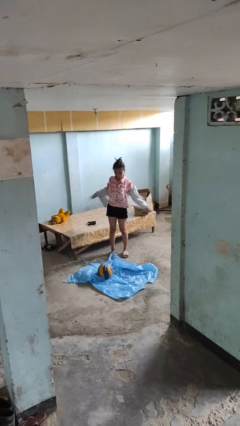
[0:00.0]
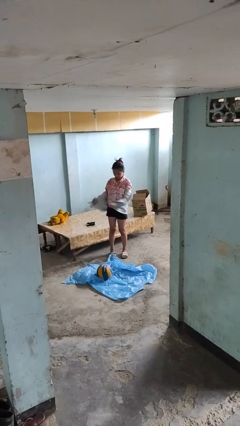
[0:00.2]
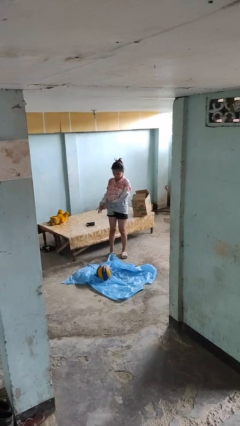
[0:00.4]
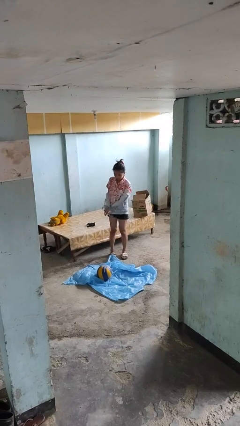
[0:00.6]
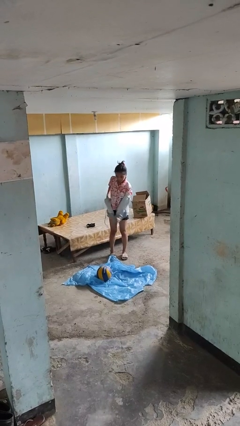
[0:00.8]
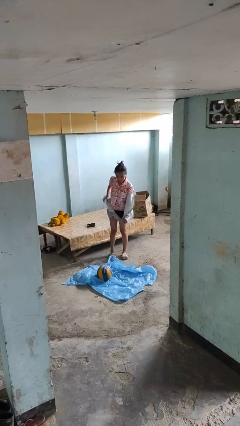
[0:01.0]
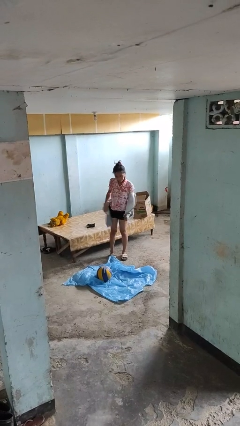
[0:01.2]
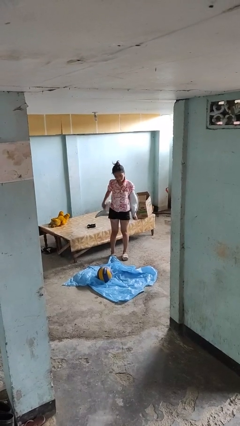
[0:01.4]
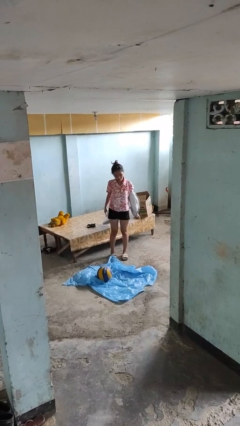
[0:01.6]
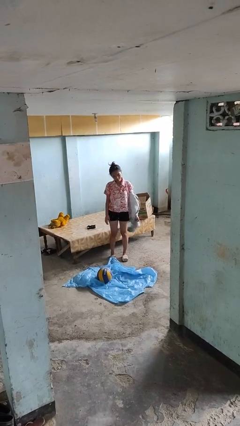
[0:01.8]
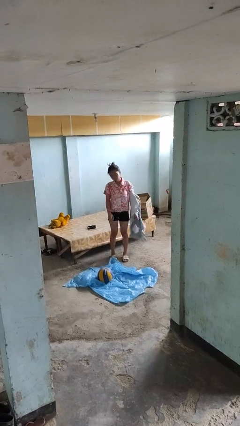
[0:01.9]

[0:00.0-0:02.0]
person takes off jacket

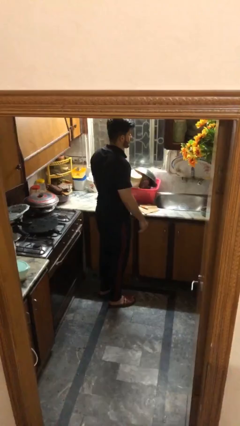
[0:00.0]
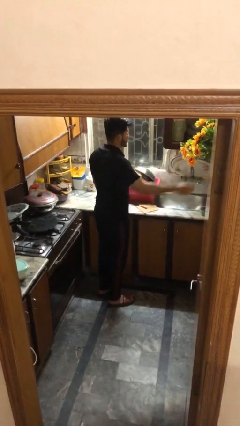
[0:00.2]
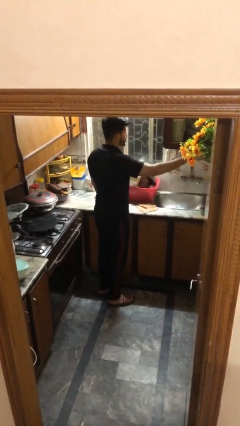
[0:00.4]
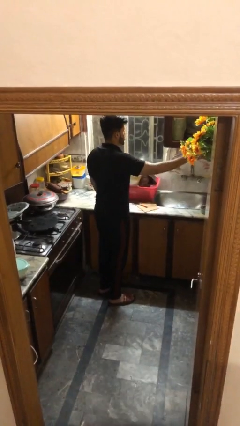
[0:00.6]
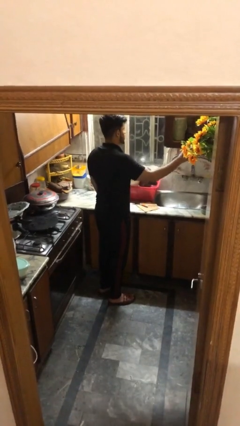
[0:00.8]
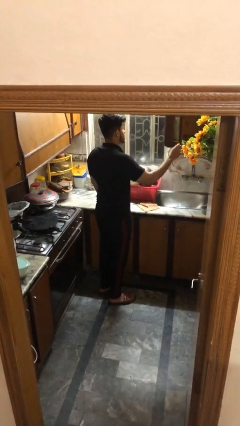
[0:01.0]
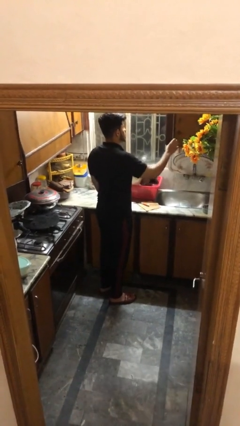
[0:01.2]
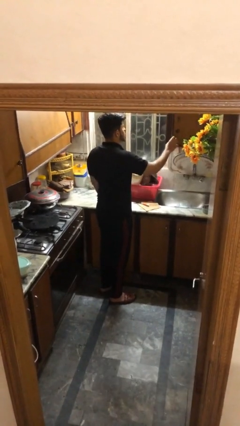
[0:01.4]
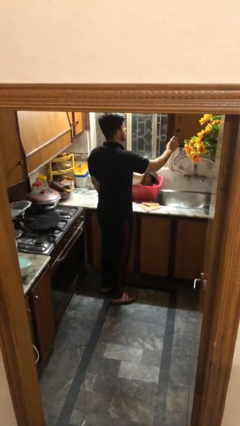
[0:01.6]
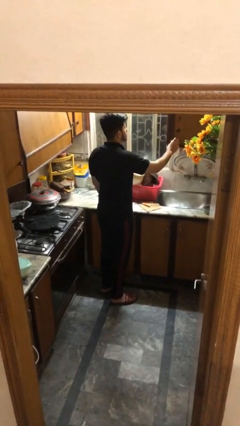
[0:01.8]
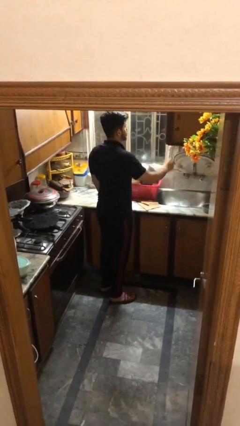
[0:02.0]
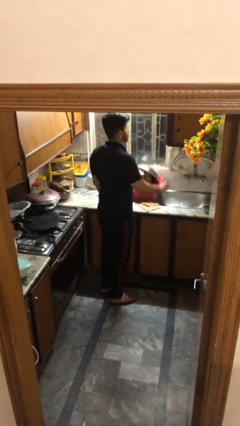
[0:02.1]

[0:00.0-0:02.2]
person closes kitchen drawer

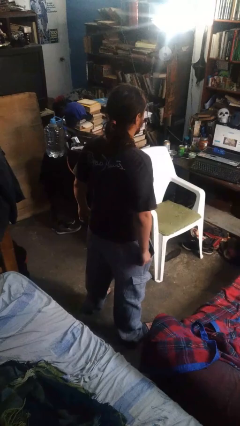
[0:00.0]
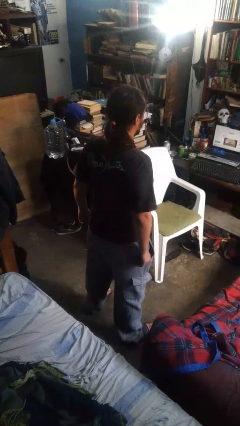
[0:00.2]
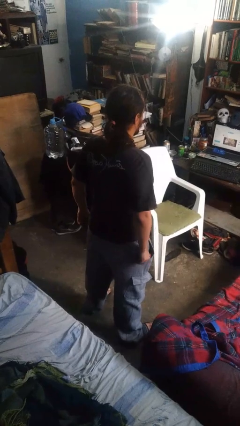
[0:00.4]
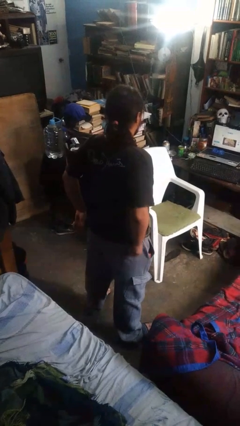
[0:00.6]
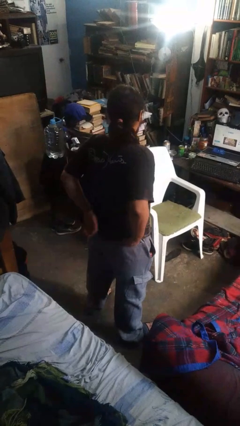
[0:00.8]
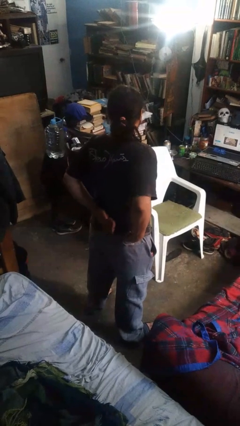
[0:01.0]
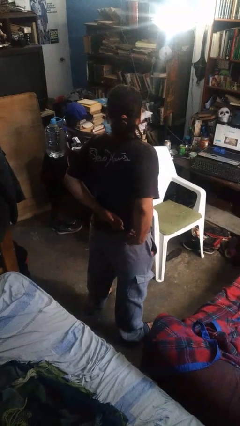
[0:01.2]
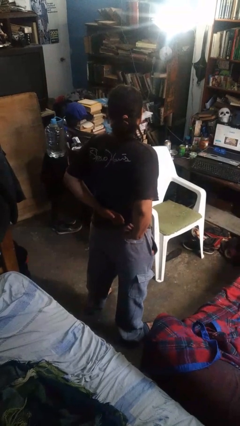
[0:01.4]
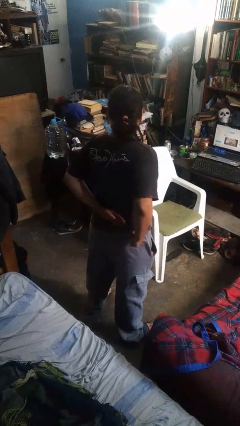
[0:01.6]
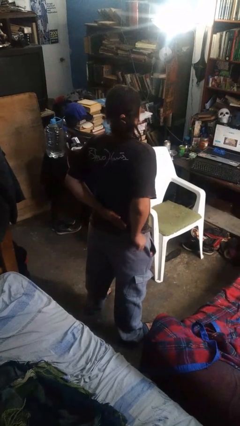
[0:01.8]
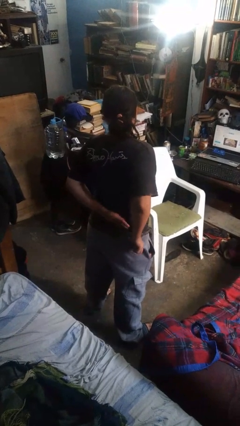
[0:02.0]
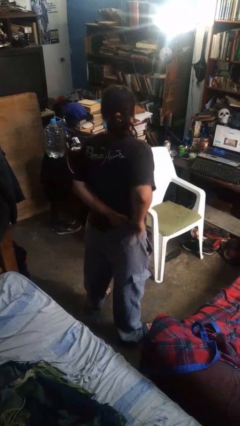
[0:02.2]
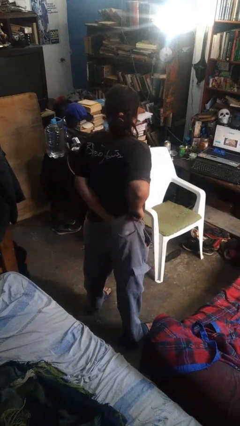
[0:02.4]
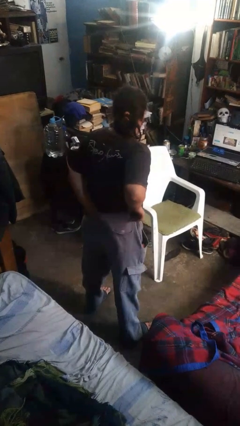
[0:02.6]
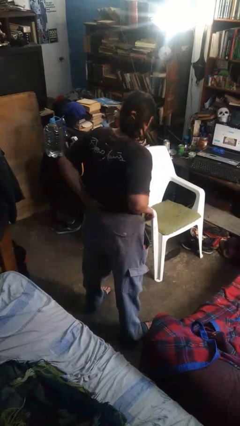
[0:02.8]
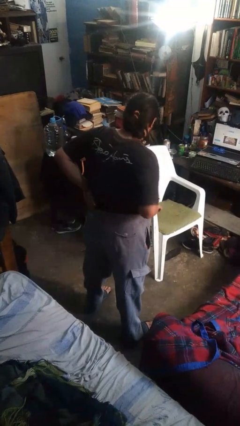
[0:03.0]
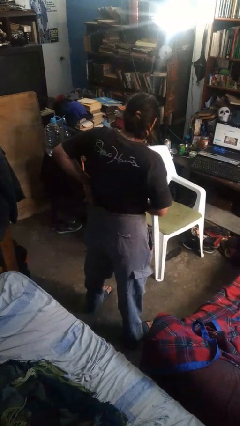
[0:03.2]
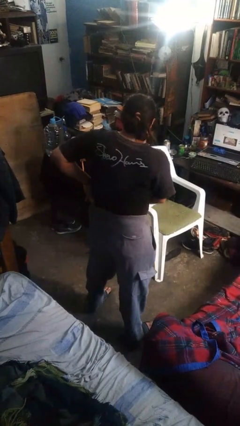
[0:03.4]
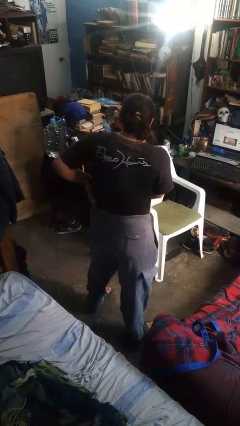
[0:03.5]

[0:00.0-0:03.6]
person tucks in shirt

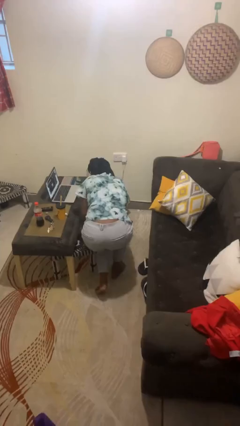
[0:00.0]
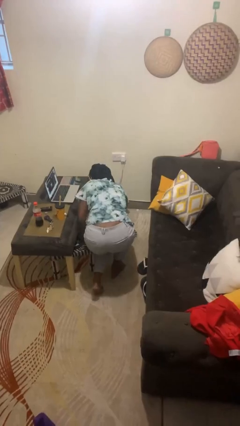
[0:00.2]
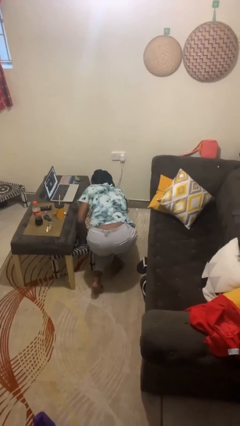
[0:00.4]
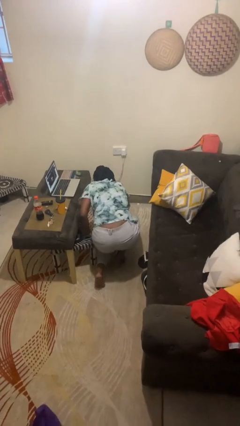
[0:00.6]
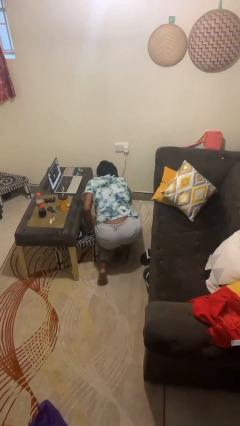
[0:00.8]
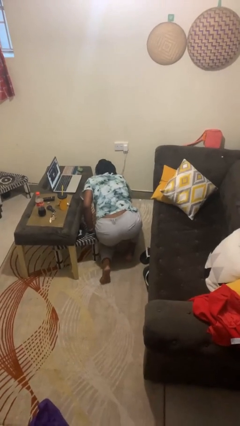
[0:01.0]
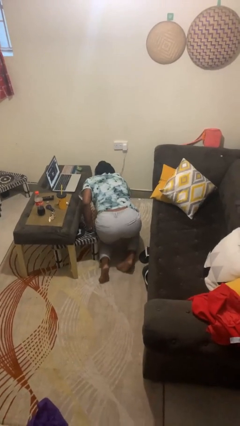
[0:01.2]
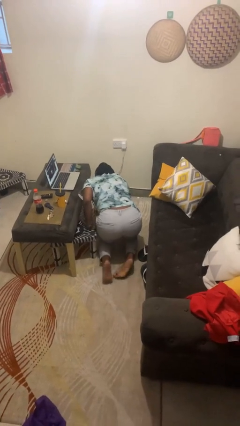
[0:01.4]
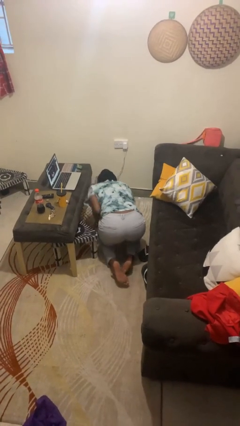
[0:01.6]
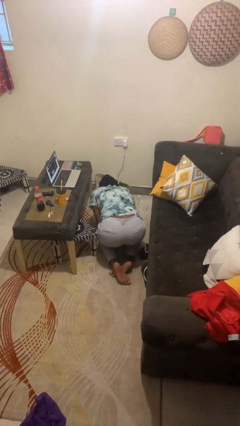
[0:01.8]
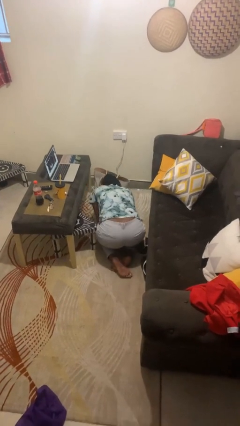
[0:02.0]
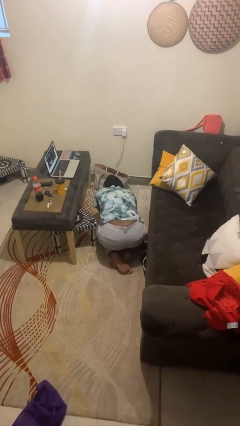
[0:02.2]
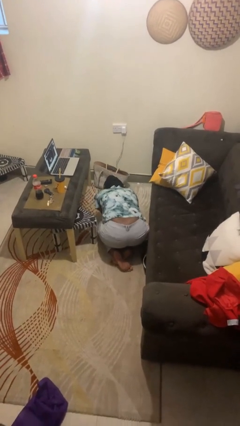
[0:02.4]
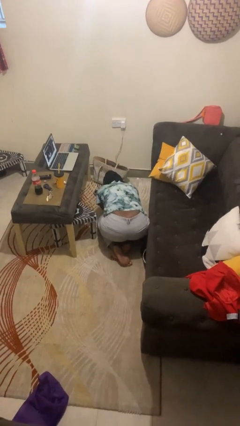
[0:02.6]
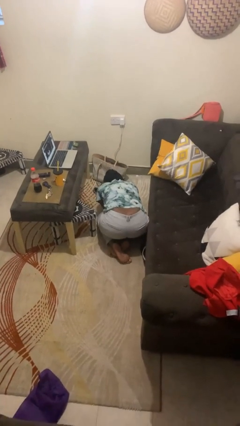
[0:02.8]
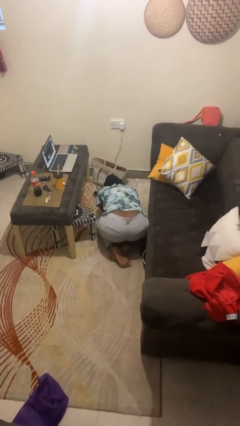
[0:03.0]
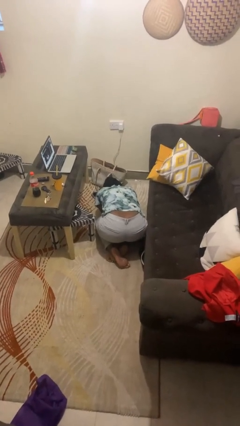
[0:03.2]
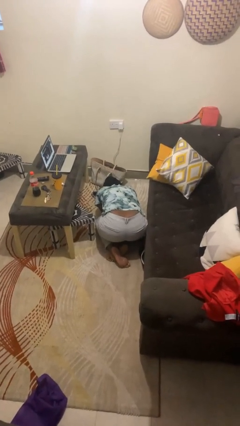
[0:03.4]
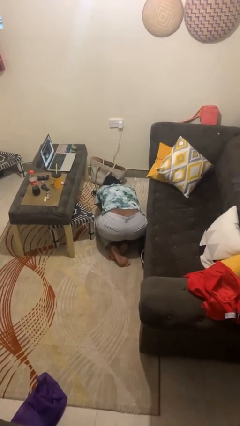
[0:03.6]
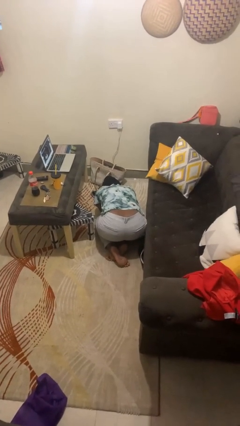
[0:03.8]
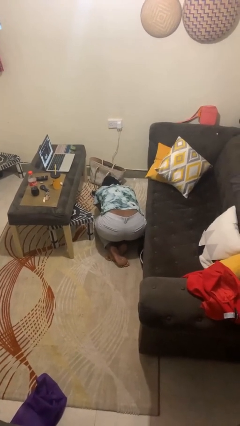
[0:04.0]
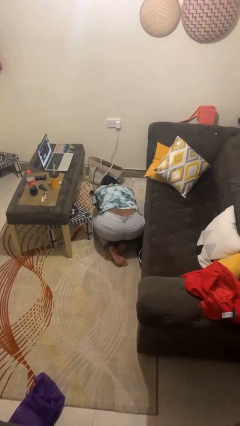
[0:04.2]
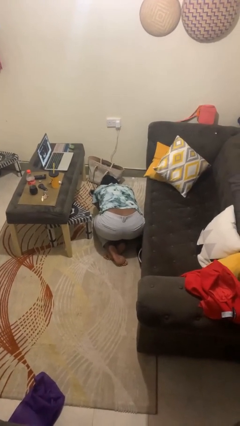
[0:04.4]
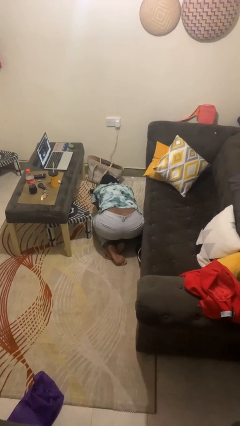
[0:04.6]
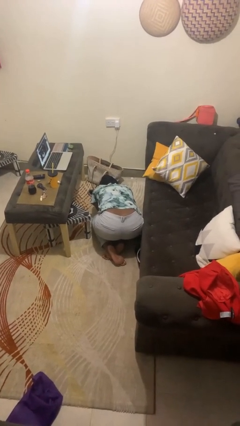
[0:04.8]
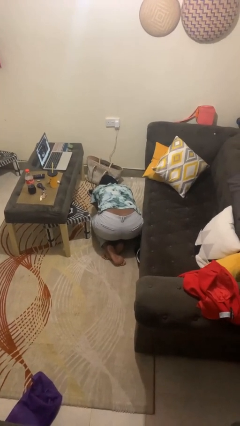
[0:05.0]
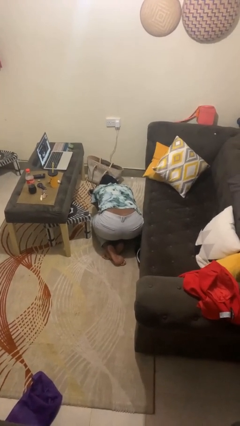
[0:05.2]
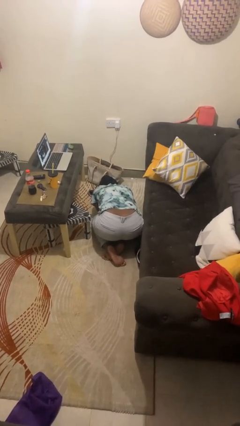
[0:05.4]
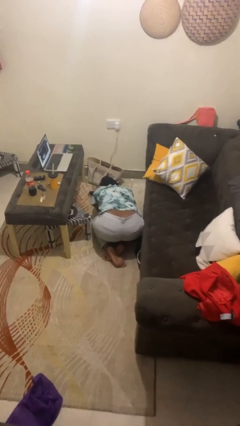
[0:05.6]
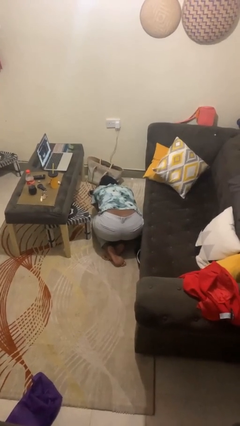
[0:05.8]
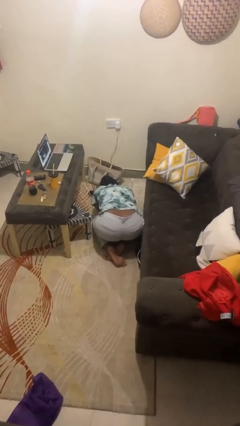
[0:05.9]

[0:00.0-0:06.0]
person lies down on floor

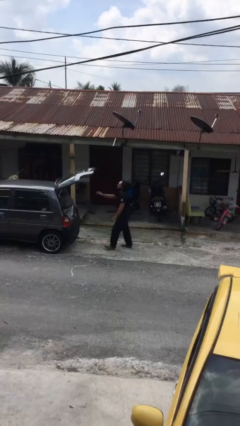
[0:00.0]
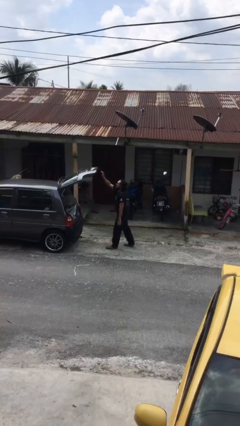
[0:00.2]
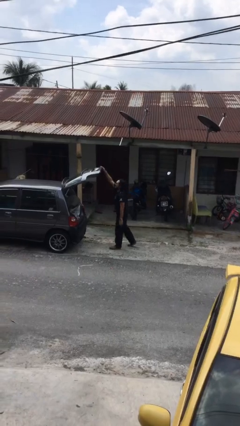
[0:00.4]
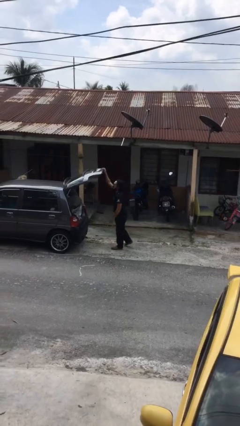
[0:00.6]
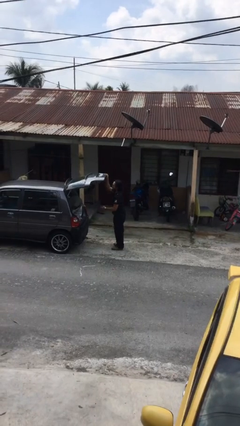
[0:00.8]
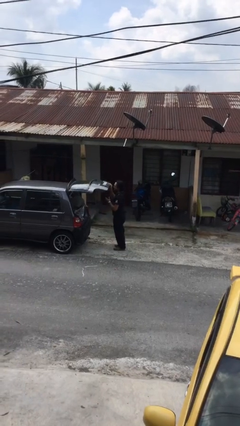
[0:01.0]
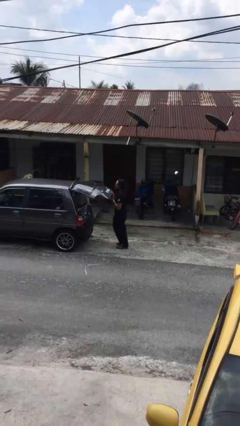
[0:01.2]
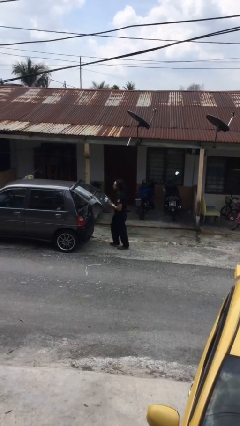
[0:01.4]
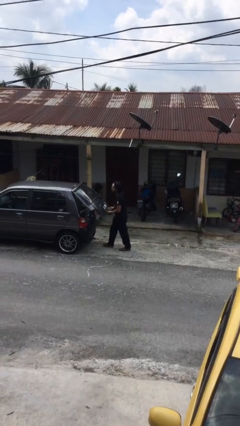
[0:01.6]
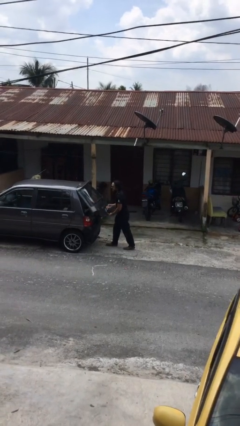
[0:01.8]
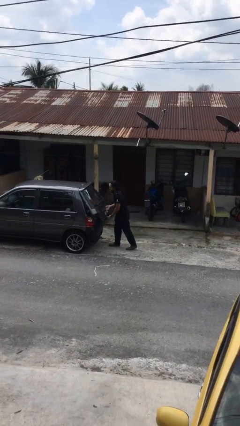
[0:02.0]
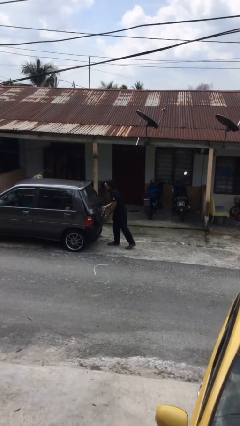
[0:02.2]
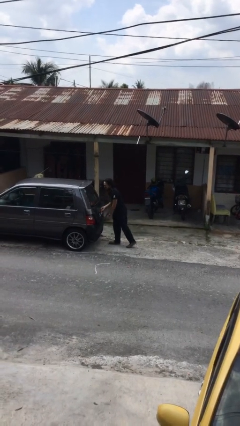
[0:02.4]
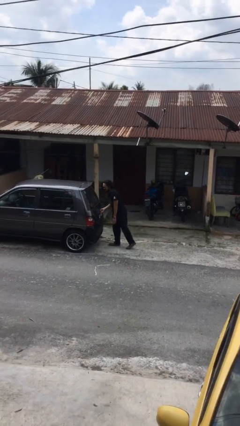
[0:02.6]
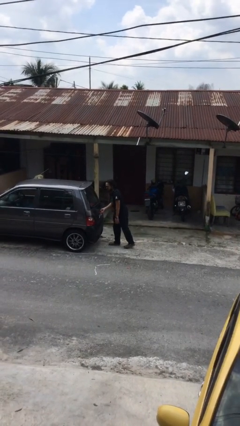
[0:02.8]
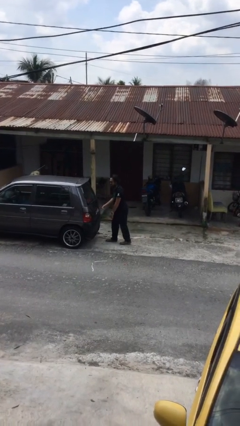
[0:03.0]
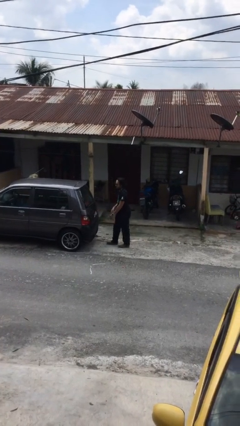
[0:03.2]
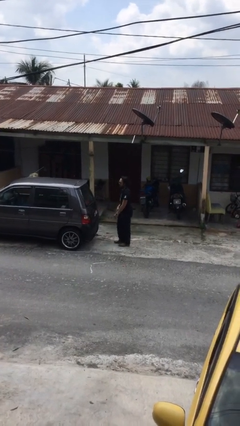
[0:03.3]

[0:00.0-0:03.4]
person closes car trunk

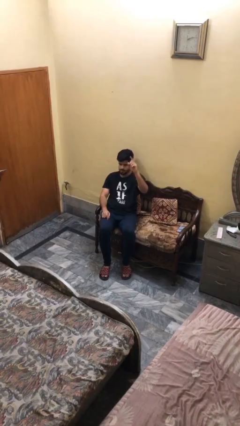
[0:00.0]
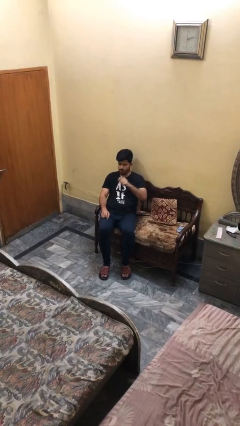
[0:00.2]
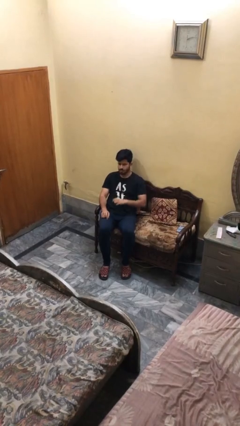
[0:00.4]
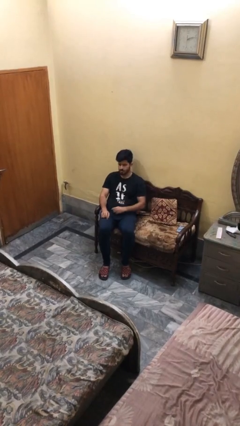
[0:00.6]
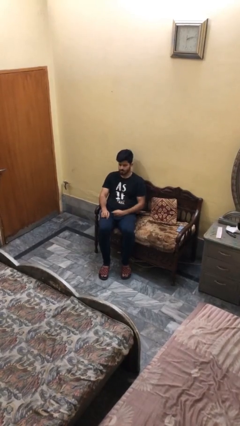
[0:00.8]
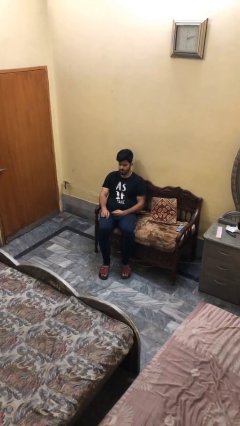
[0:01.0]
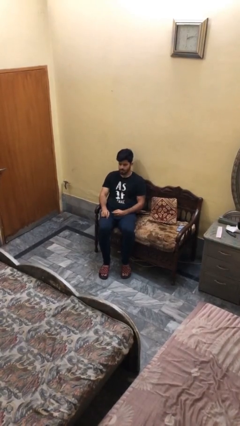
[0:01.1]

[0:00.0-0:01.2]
person gestures lower hand
